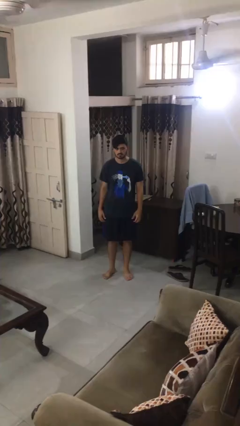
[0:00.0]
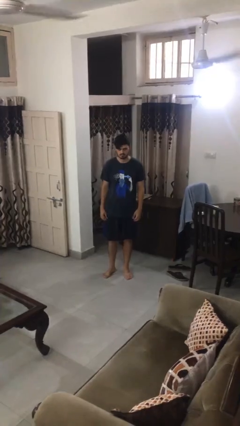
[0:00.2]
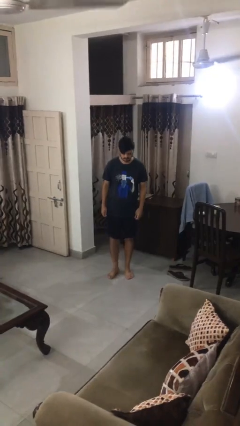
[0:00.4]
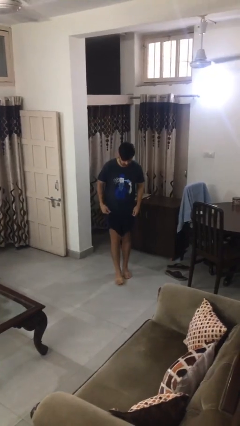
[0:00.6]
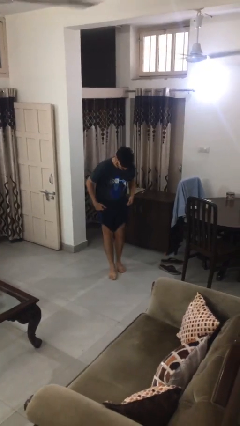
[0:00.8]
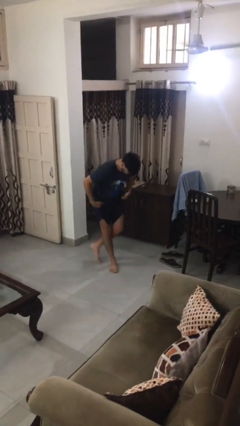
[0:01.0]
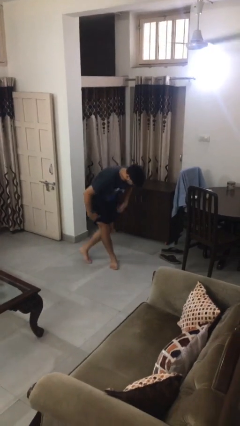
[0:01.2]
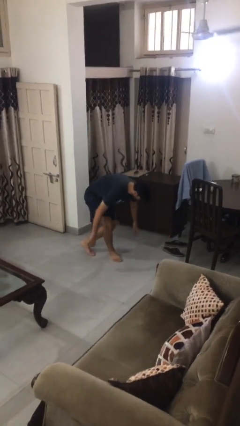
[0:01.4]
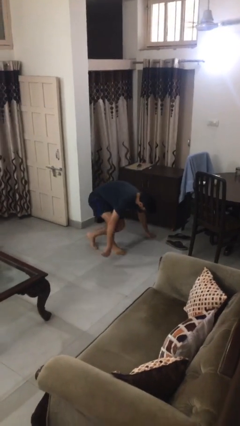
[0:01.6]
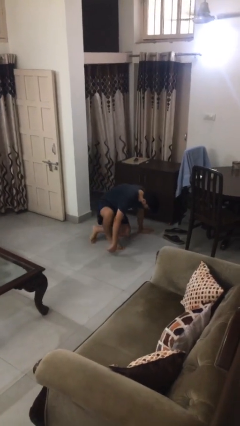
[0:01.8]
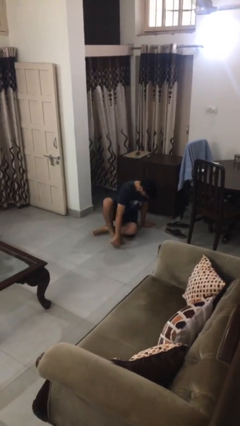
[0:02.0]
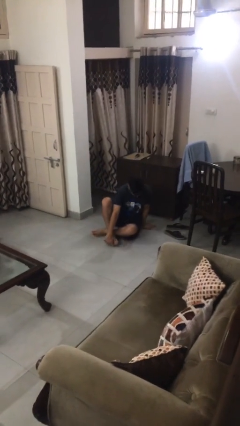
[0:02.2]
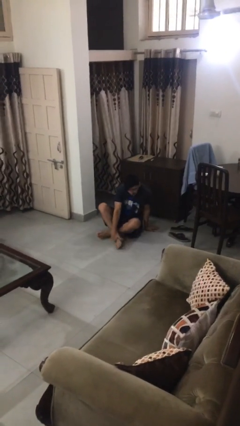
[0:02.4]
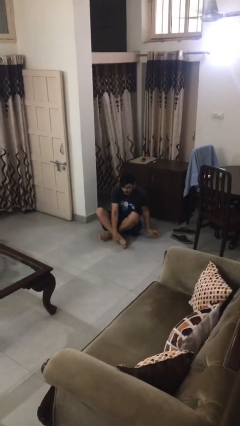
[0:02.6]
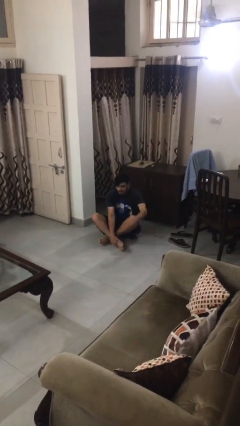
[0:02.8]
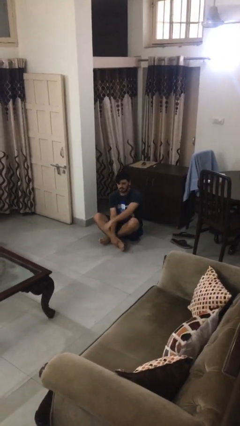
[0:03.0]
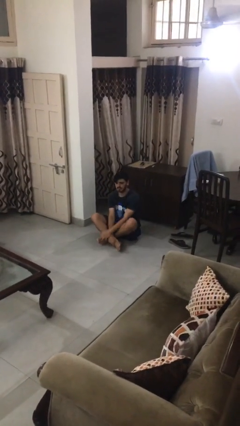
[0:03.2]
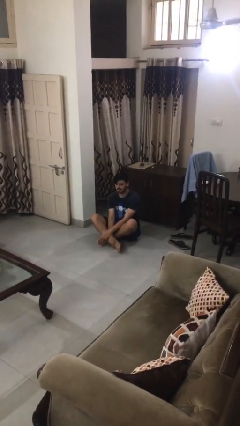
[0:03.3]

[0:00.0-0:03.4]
person sits crisscross

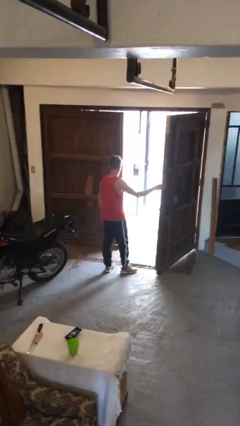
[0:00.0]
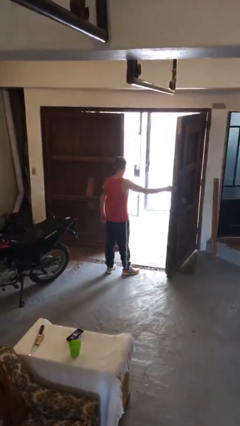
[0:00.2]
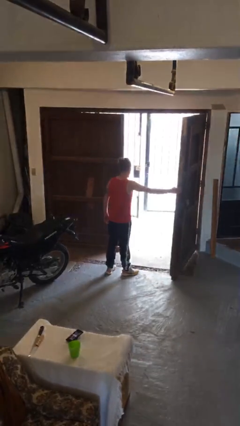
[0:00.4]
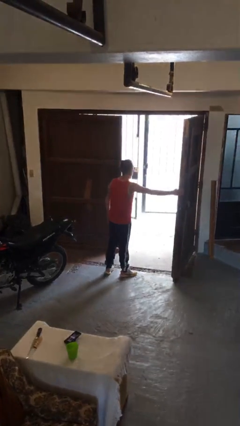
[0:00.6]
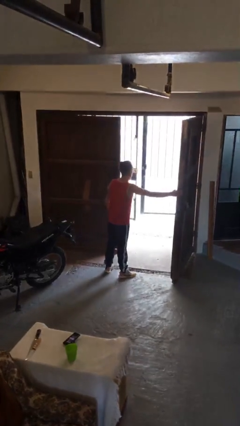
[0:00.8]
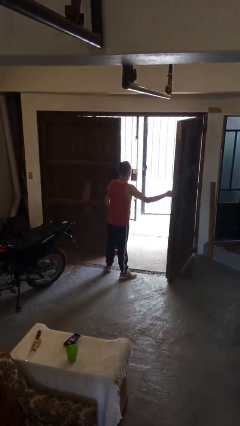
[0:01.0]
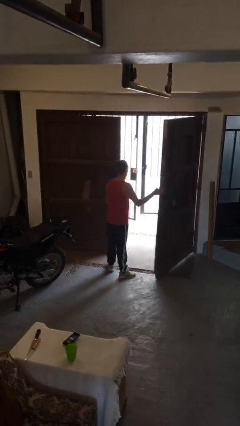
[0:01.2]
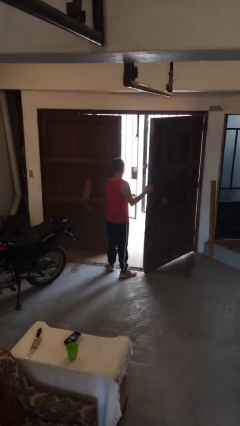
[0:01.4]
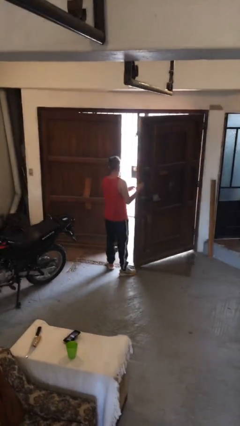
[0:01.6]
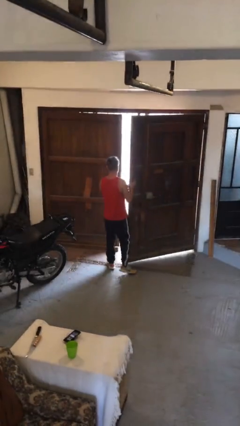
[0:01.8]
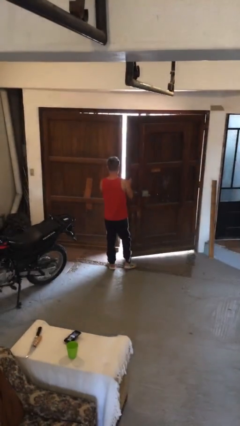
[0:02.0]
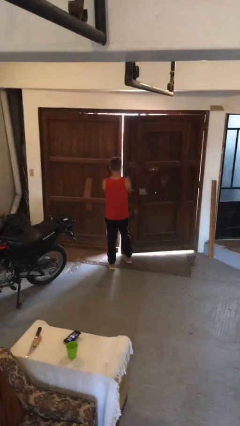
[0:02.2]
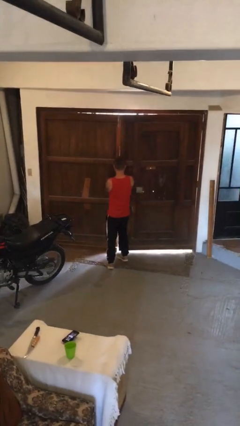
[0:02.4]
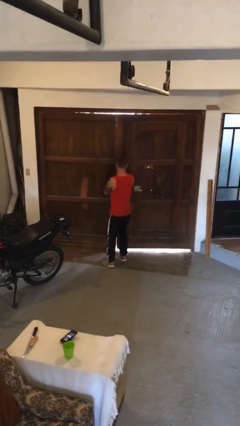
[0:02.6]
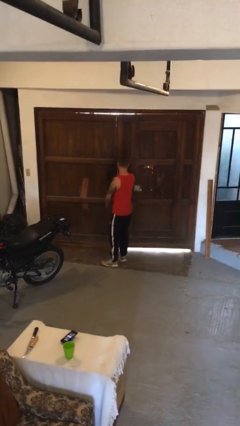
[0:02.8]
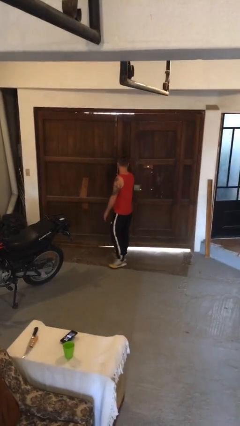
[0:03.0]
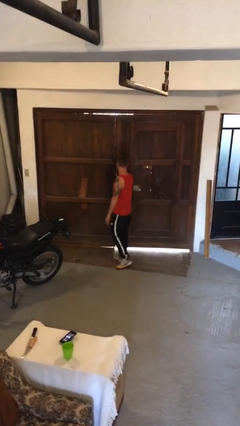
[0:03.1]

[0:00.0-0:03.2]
person closes gate

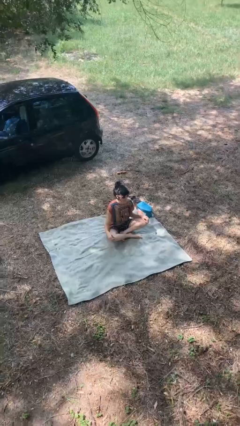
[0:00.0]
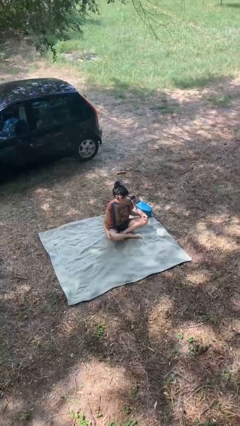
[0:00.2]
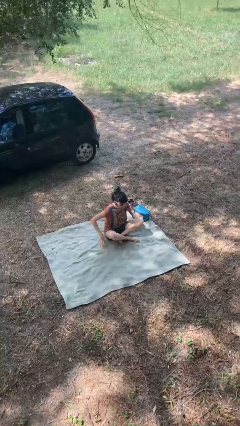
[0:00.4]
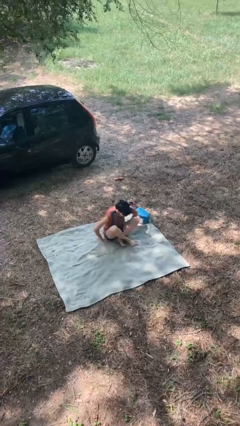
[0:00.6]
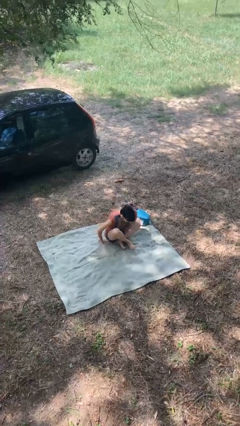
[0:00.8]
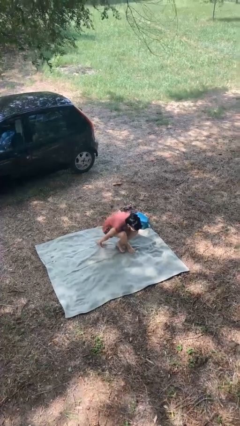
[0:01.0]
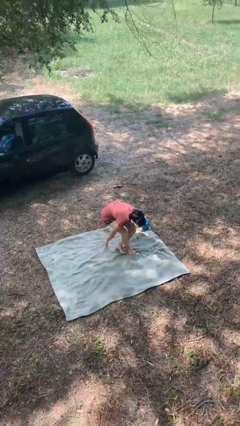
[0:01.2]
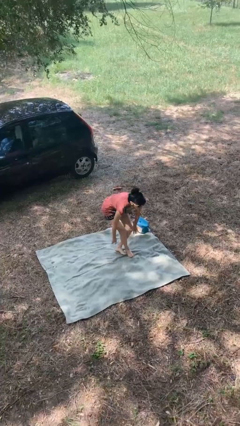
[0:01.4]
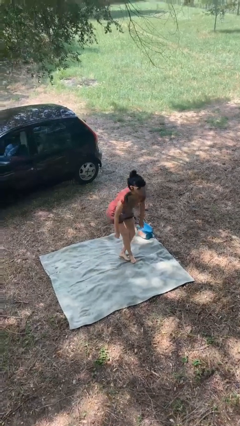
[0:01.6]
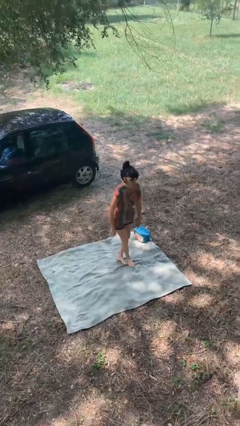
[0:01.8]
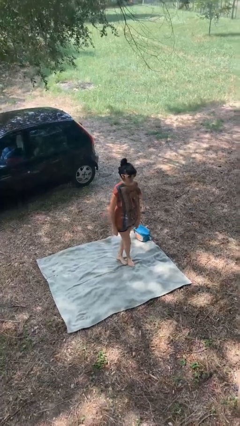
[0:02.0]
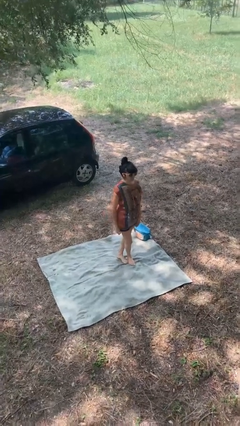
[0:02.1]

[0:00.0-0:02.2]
person stands up from floor

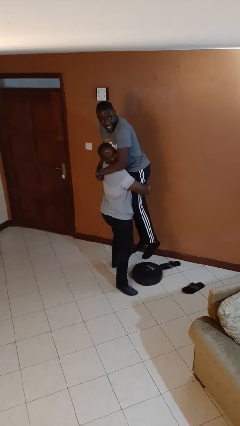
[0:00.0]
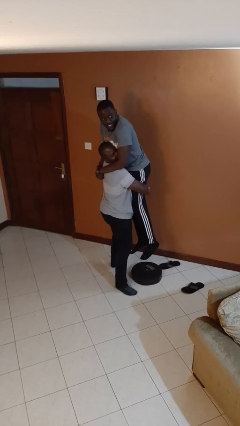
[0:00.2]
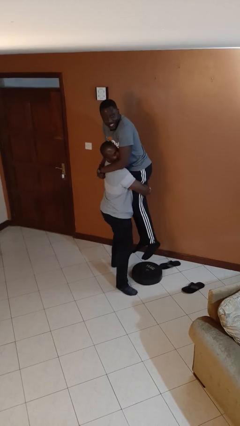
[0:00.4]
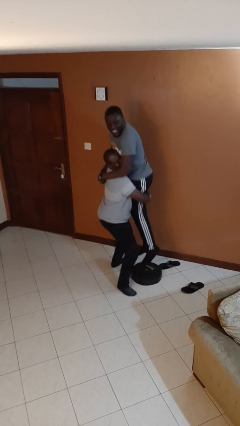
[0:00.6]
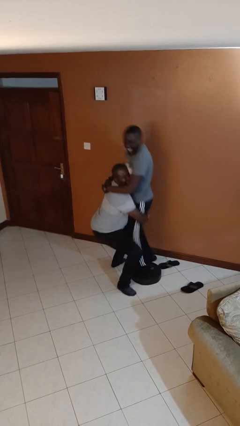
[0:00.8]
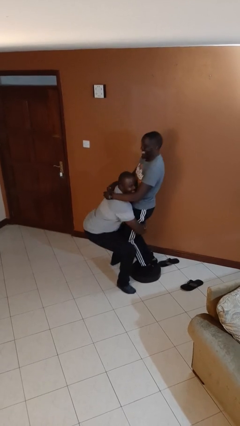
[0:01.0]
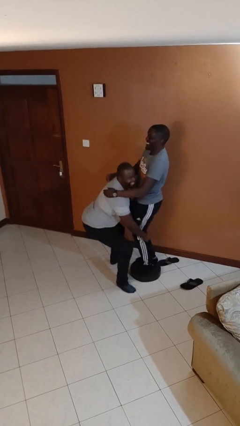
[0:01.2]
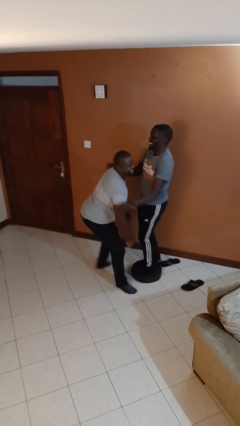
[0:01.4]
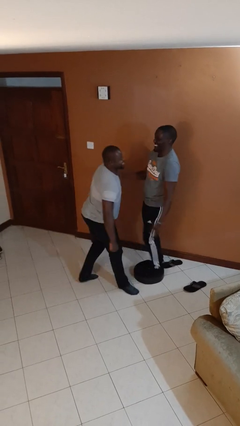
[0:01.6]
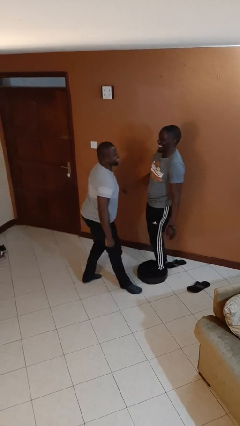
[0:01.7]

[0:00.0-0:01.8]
person puts down person

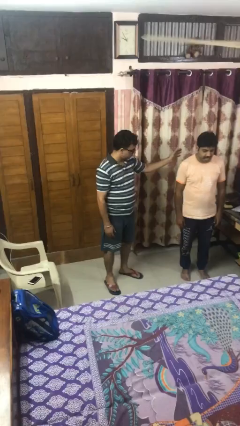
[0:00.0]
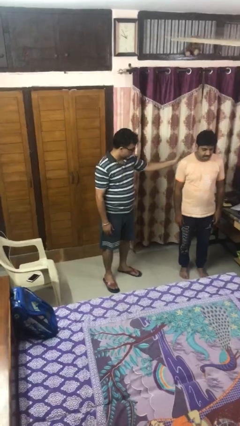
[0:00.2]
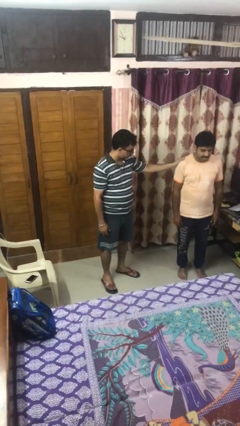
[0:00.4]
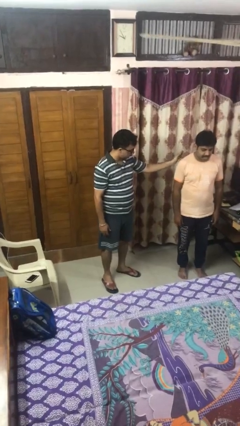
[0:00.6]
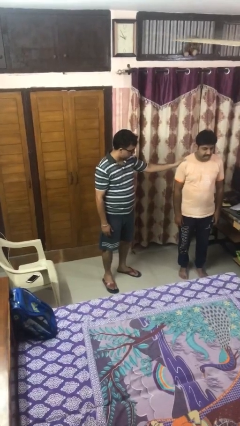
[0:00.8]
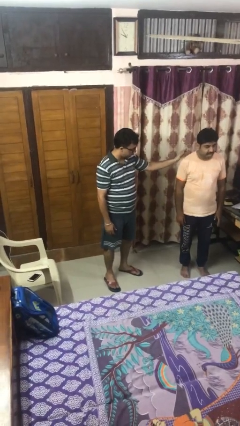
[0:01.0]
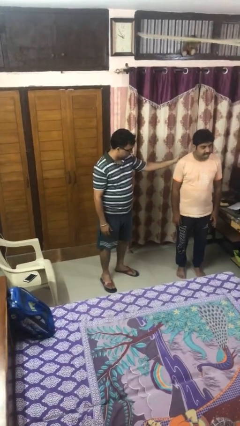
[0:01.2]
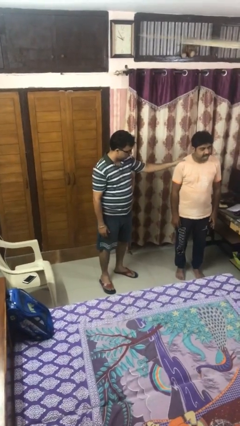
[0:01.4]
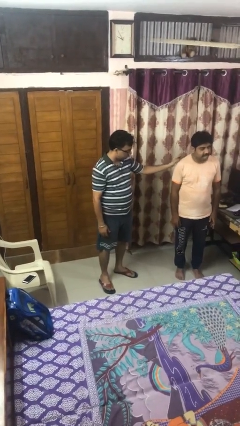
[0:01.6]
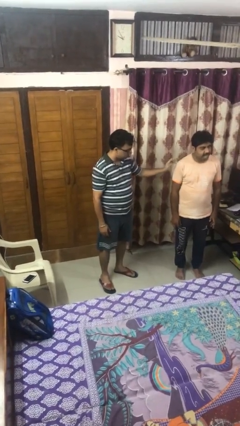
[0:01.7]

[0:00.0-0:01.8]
person pounds shoulders of person

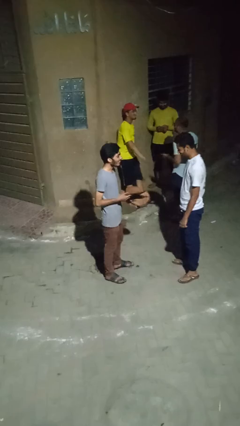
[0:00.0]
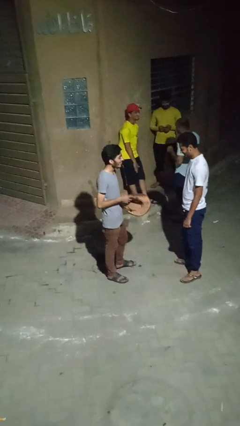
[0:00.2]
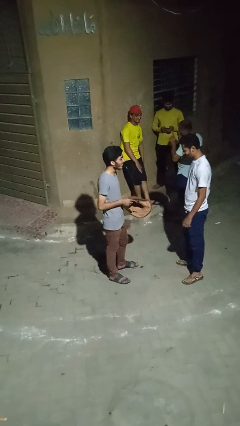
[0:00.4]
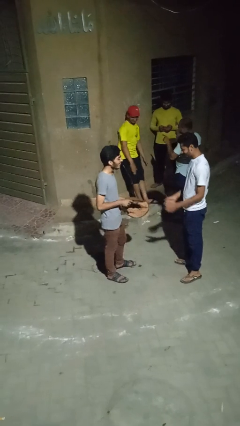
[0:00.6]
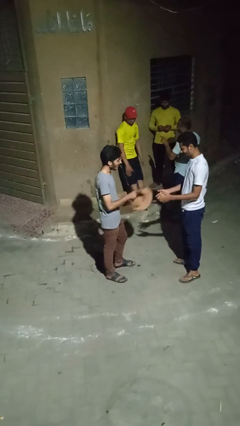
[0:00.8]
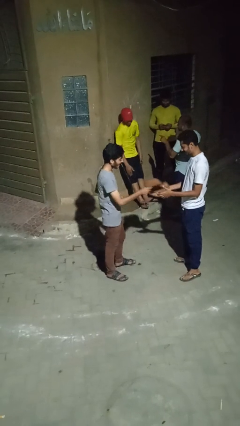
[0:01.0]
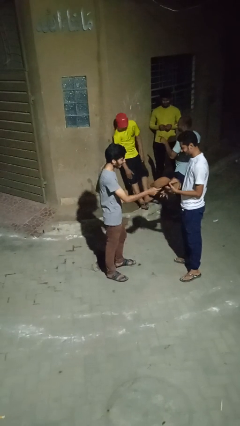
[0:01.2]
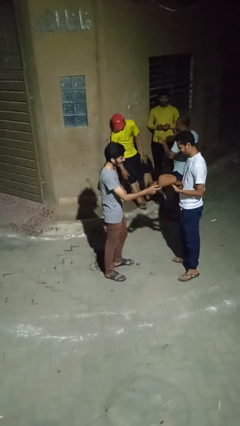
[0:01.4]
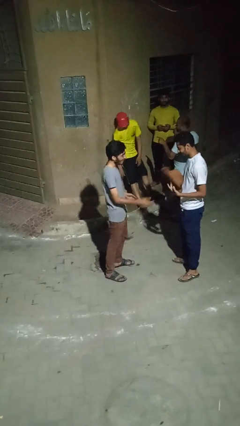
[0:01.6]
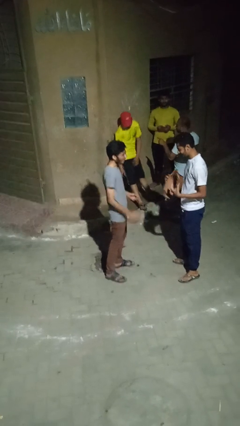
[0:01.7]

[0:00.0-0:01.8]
person transfers object to person

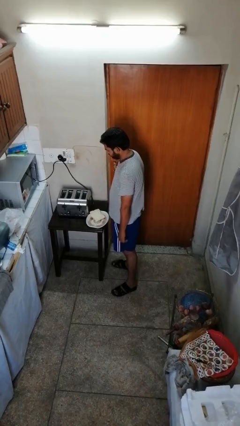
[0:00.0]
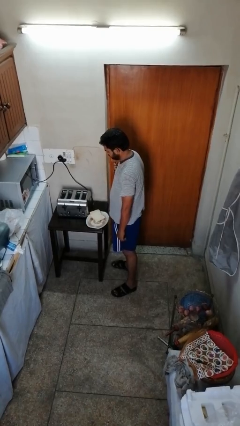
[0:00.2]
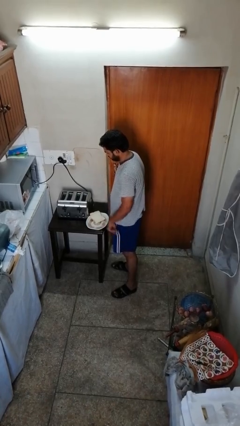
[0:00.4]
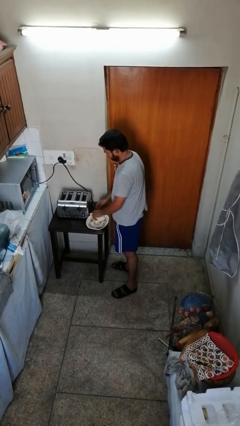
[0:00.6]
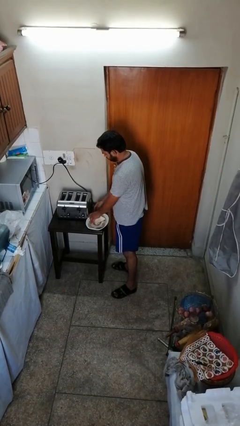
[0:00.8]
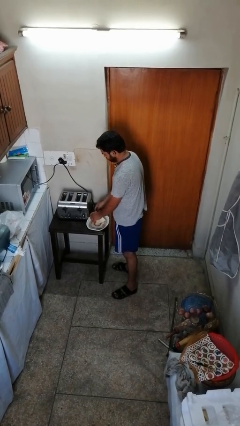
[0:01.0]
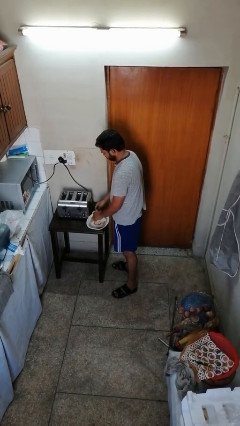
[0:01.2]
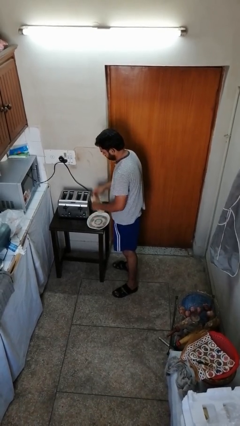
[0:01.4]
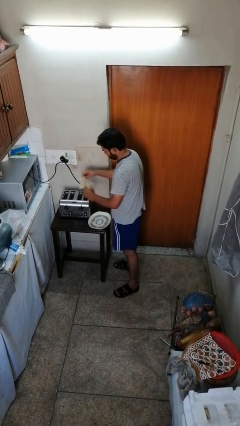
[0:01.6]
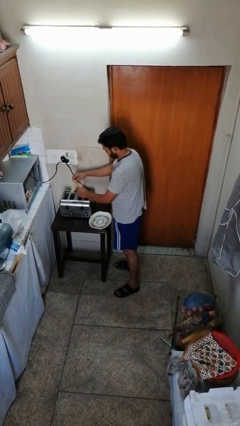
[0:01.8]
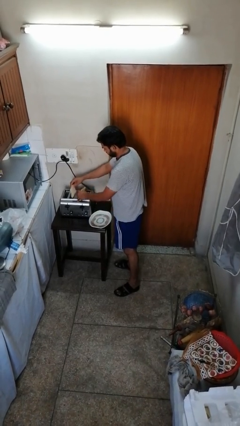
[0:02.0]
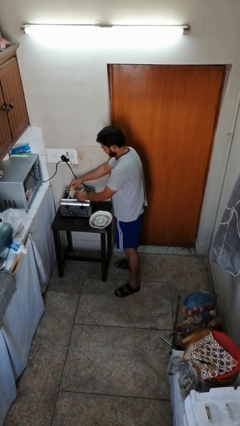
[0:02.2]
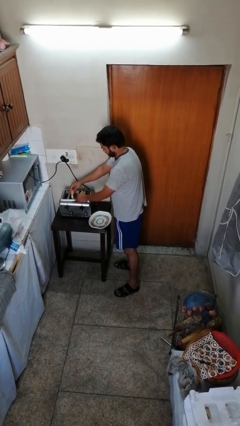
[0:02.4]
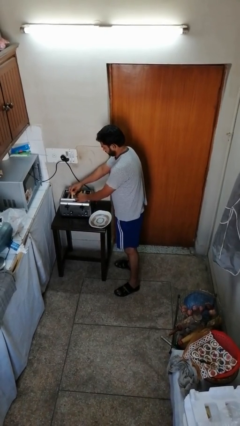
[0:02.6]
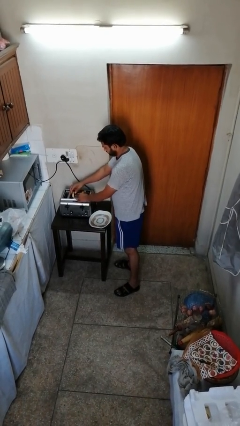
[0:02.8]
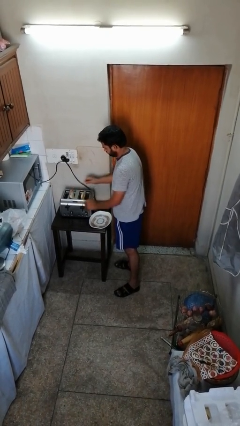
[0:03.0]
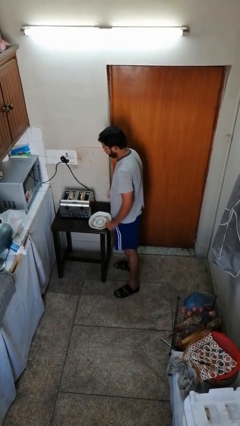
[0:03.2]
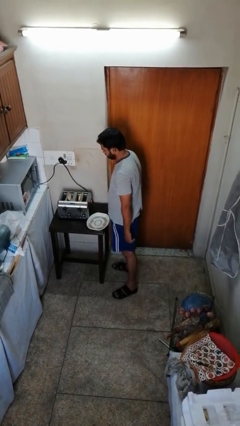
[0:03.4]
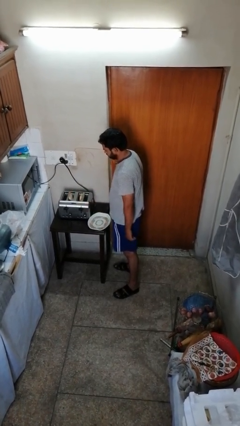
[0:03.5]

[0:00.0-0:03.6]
person puts object into toaster
